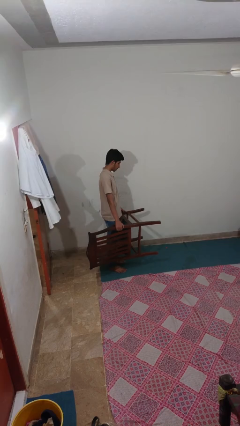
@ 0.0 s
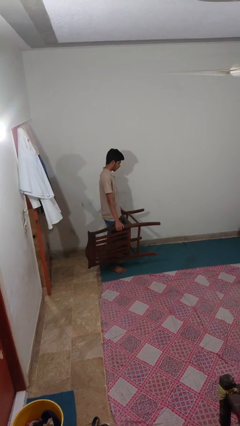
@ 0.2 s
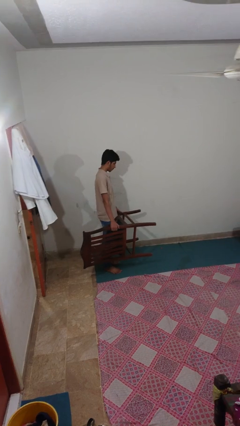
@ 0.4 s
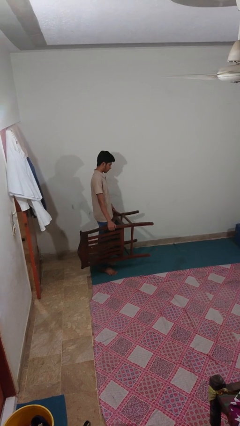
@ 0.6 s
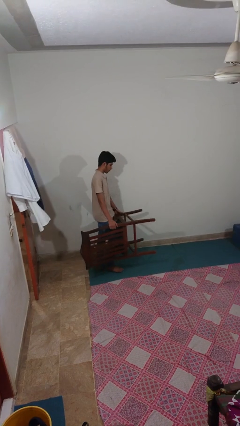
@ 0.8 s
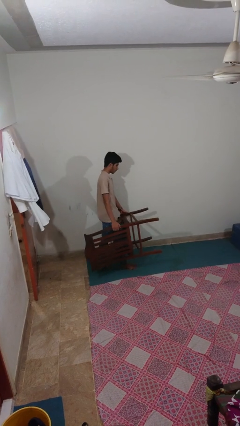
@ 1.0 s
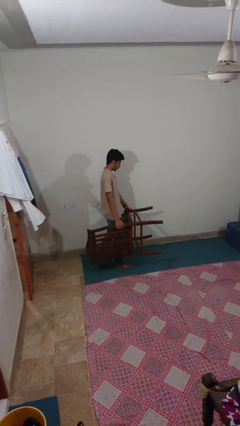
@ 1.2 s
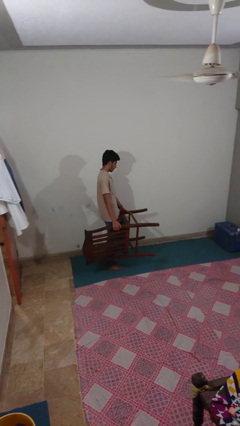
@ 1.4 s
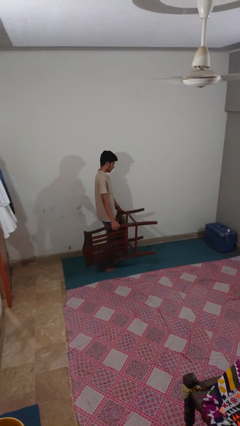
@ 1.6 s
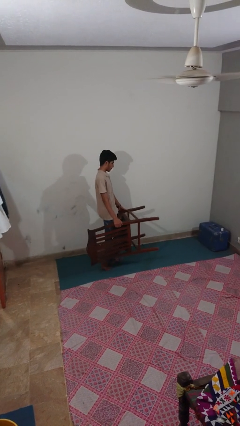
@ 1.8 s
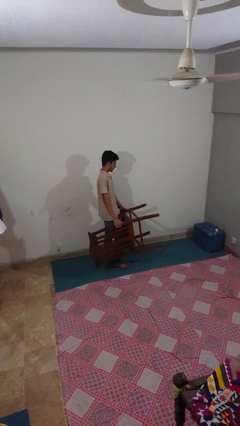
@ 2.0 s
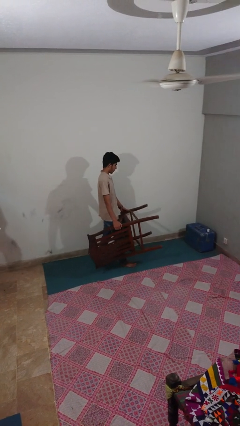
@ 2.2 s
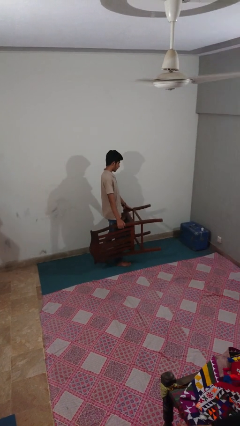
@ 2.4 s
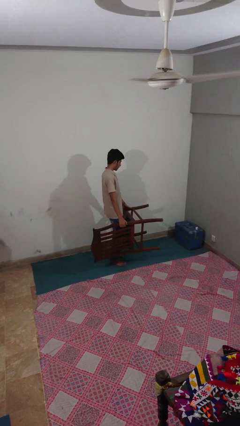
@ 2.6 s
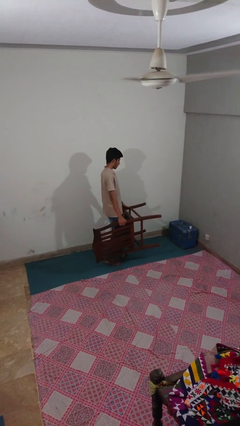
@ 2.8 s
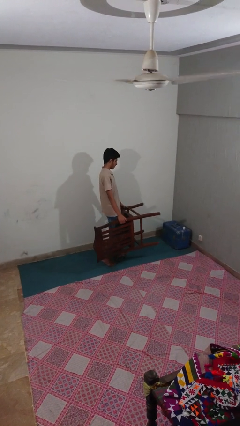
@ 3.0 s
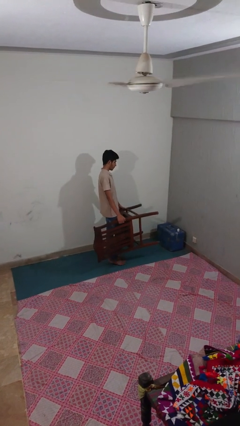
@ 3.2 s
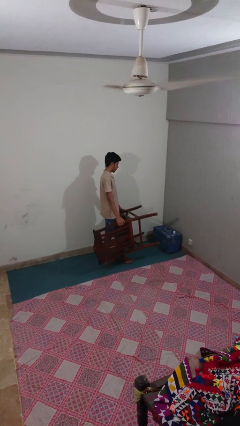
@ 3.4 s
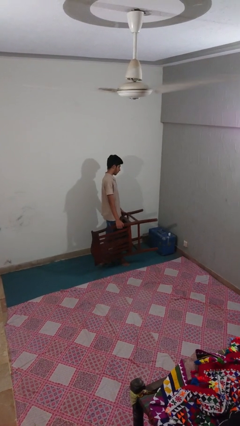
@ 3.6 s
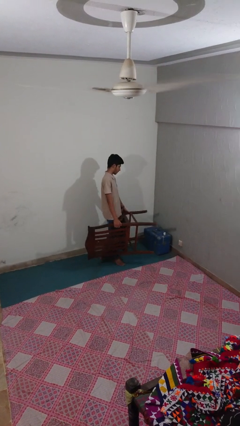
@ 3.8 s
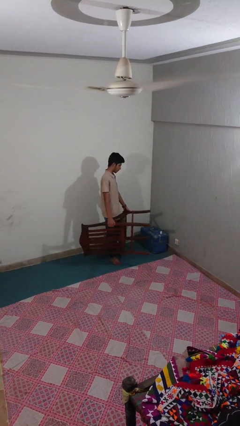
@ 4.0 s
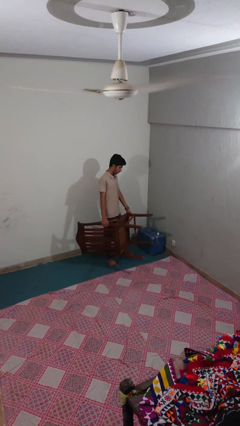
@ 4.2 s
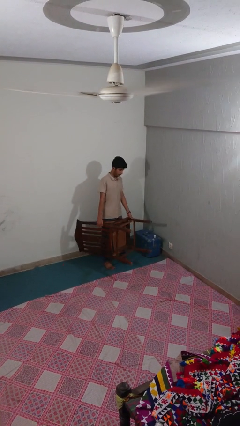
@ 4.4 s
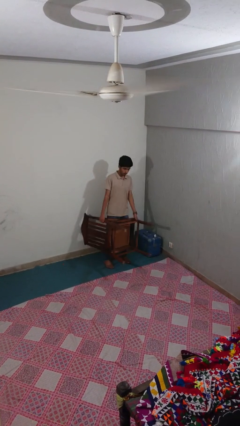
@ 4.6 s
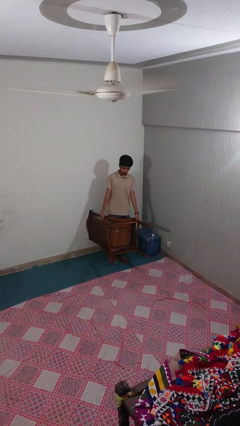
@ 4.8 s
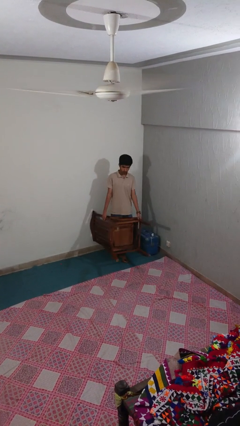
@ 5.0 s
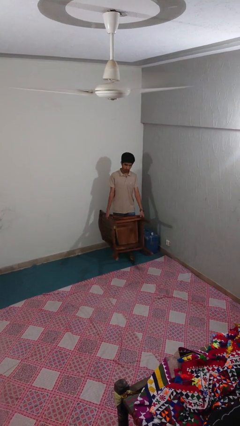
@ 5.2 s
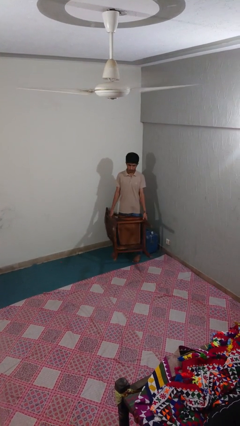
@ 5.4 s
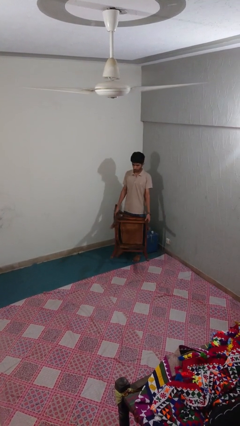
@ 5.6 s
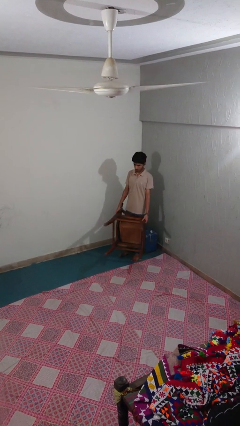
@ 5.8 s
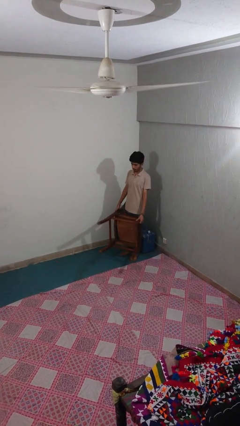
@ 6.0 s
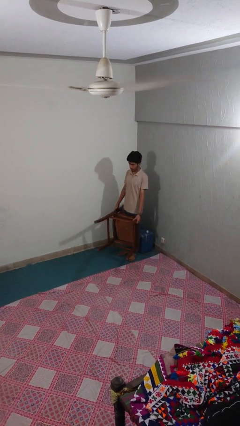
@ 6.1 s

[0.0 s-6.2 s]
person carries furniture

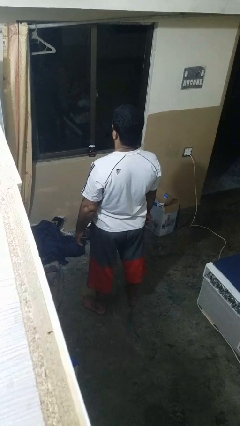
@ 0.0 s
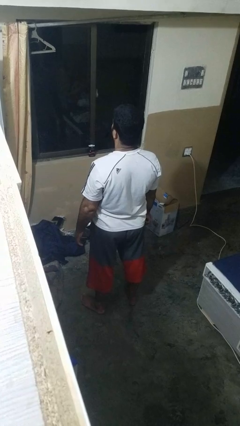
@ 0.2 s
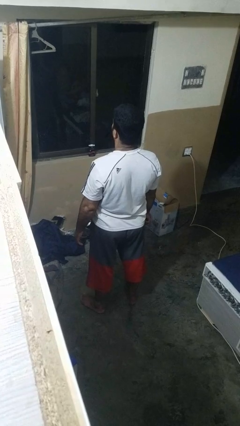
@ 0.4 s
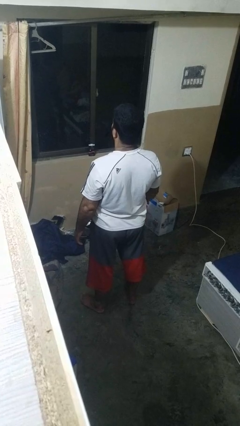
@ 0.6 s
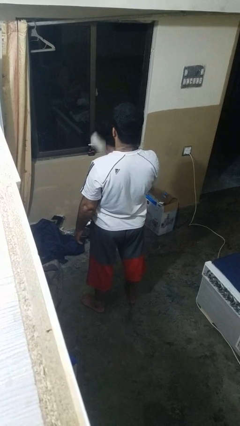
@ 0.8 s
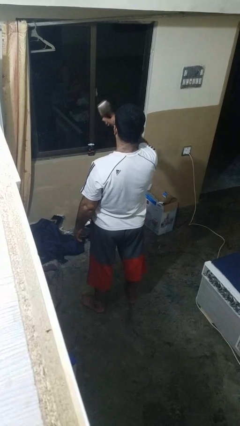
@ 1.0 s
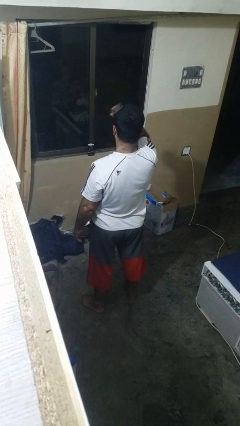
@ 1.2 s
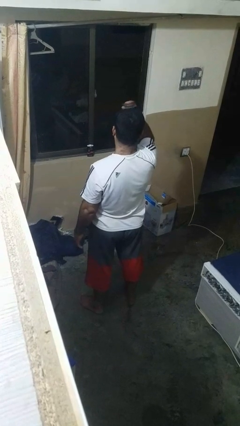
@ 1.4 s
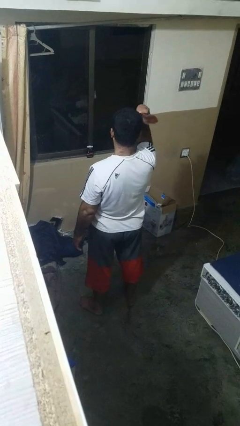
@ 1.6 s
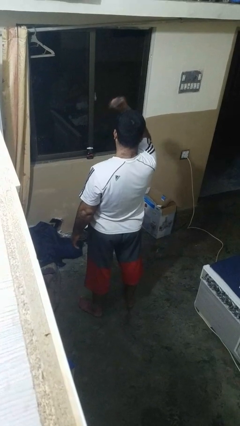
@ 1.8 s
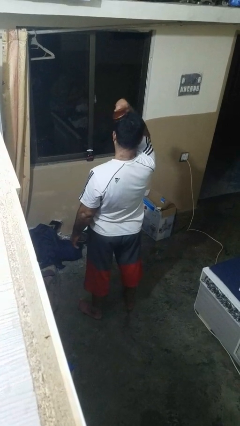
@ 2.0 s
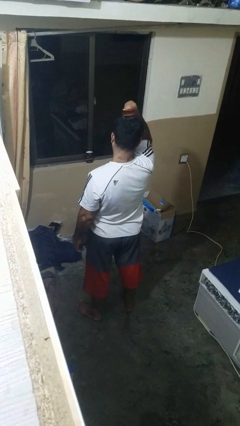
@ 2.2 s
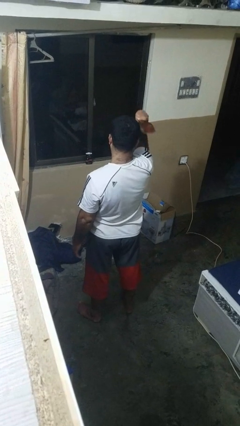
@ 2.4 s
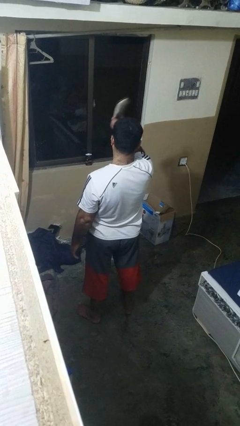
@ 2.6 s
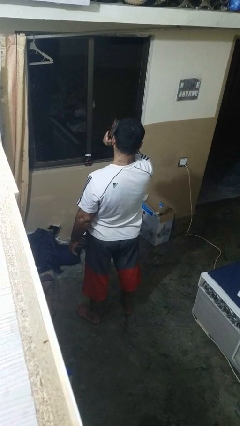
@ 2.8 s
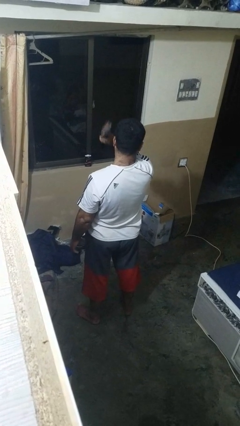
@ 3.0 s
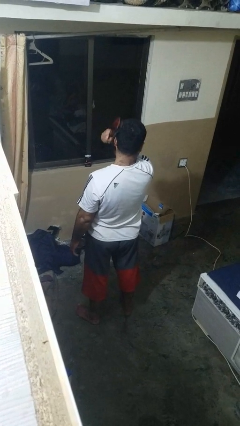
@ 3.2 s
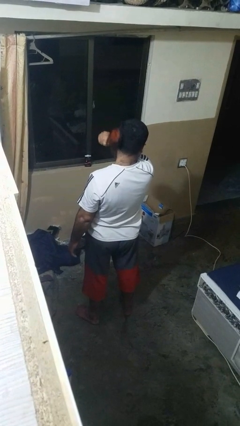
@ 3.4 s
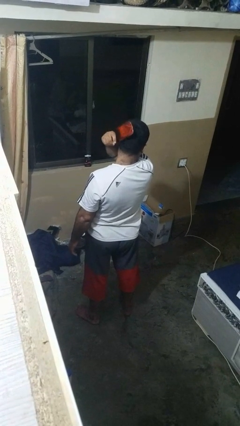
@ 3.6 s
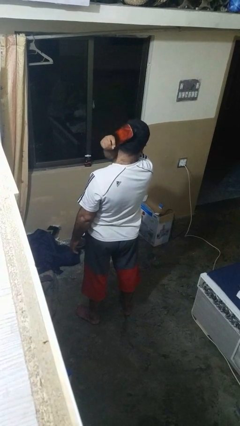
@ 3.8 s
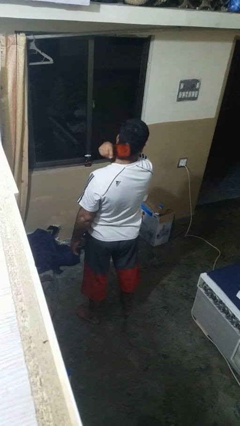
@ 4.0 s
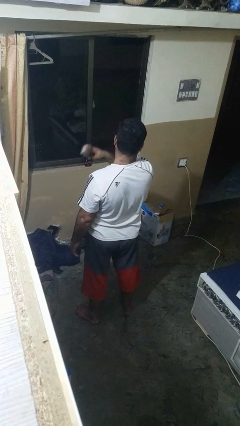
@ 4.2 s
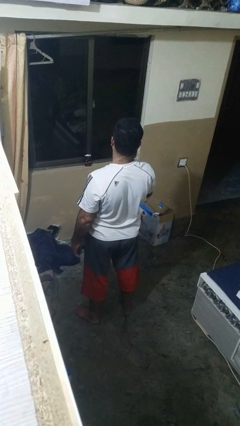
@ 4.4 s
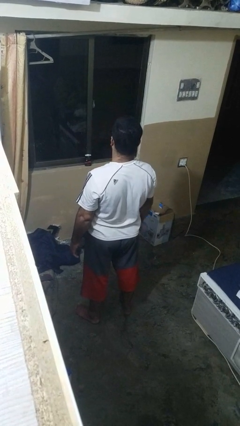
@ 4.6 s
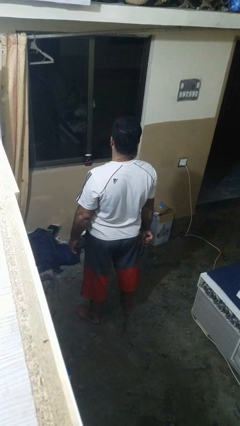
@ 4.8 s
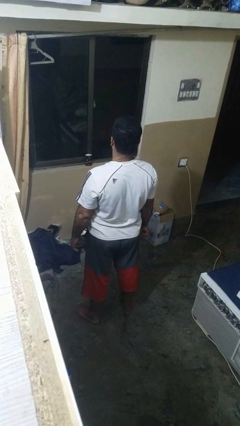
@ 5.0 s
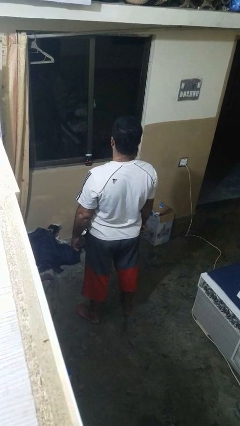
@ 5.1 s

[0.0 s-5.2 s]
person brushes hair

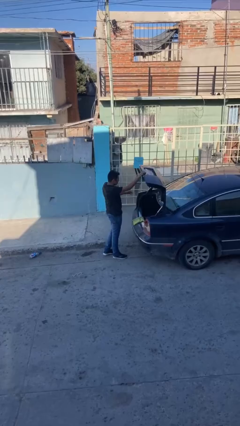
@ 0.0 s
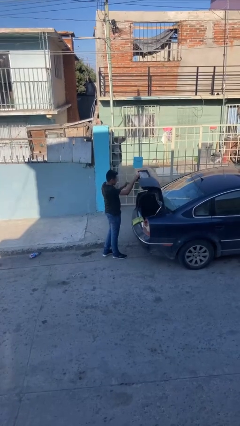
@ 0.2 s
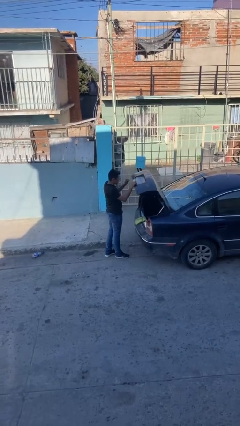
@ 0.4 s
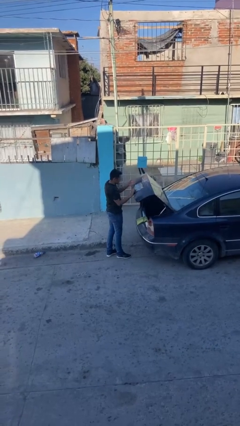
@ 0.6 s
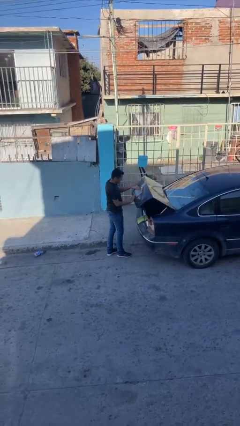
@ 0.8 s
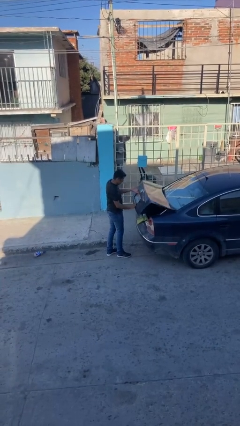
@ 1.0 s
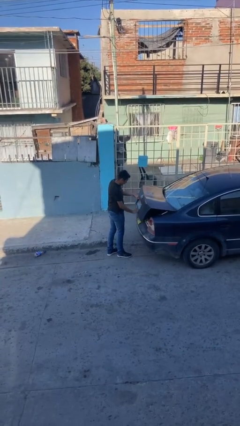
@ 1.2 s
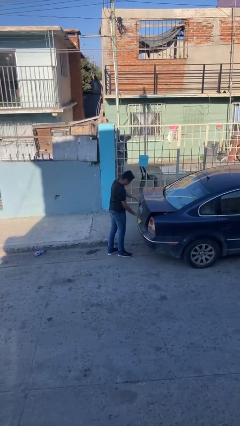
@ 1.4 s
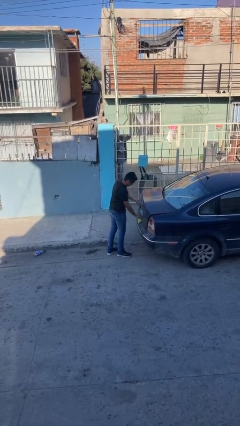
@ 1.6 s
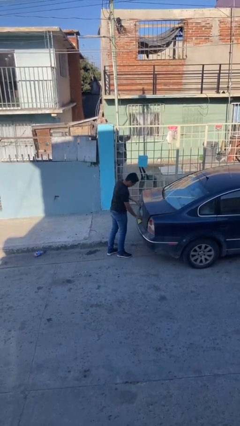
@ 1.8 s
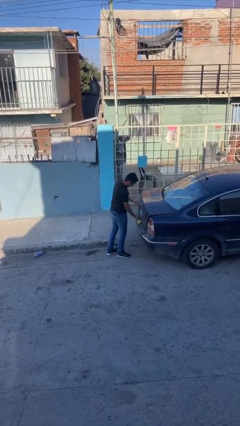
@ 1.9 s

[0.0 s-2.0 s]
person closes car trunk

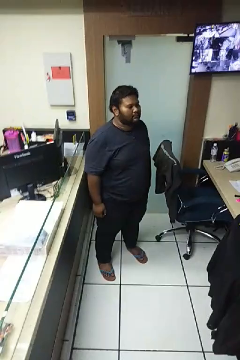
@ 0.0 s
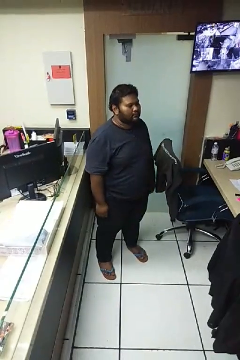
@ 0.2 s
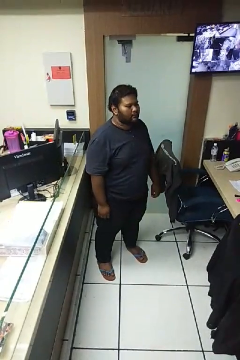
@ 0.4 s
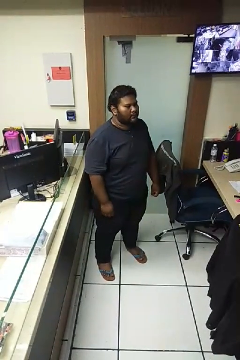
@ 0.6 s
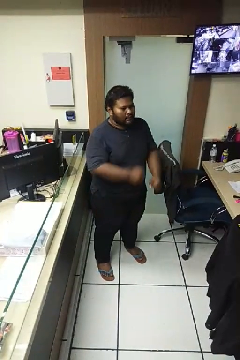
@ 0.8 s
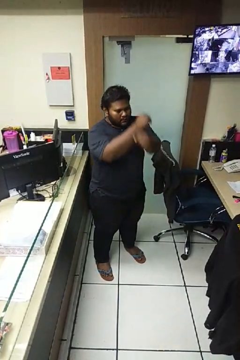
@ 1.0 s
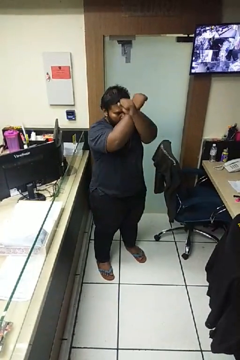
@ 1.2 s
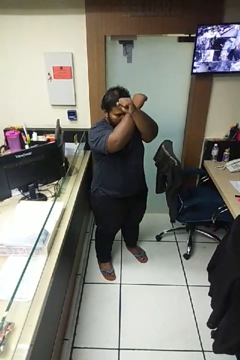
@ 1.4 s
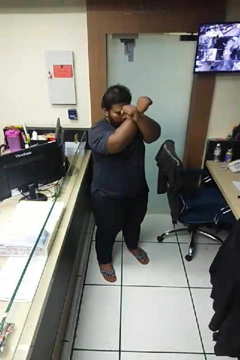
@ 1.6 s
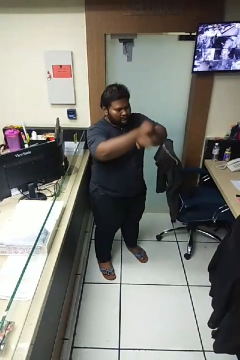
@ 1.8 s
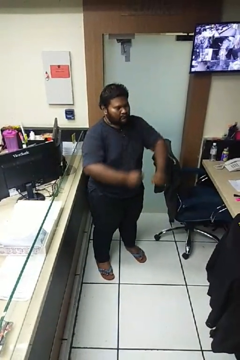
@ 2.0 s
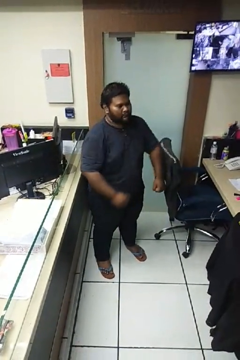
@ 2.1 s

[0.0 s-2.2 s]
person gestures arms x

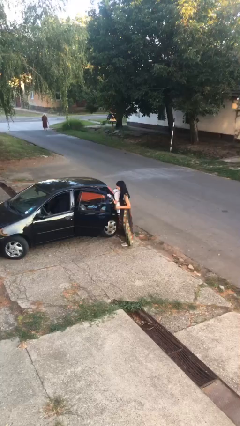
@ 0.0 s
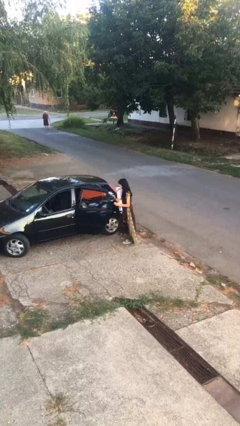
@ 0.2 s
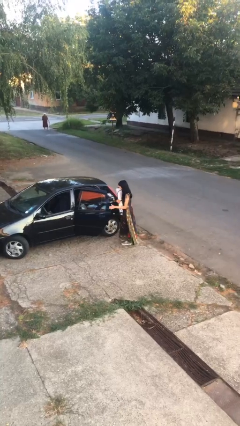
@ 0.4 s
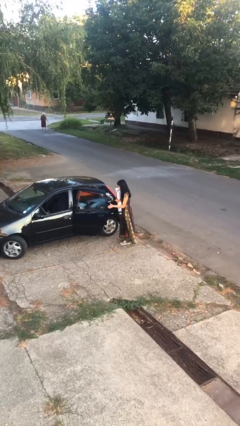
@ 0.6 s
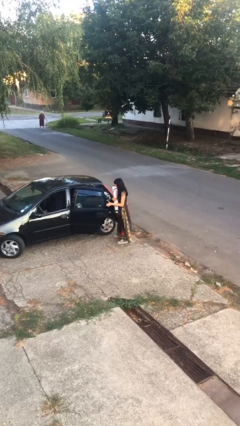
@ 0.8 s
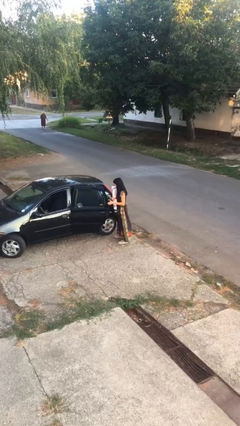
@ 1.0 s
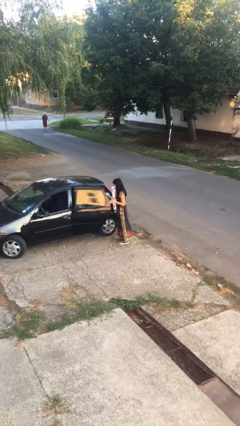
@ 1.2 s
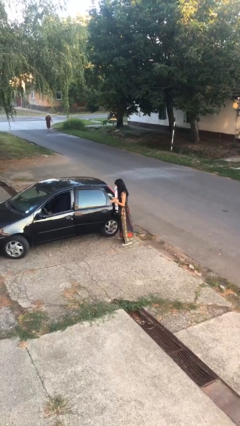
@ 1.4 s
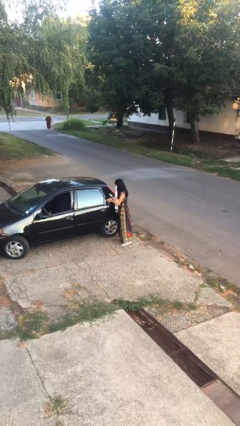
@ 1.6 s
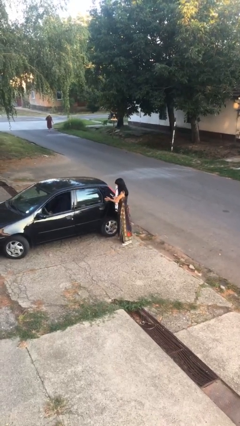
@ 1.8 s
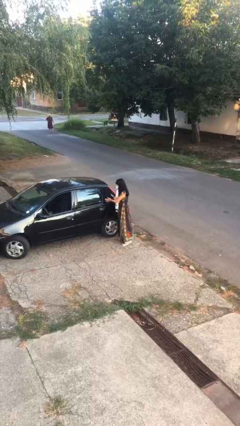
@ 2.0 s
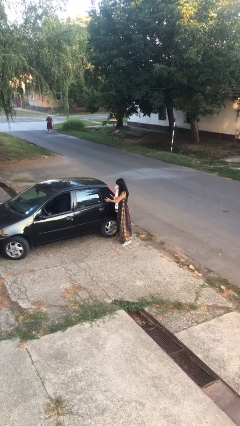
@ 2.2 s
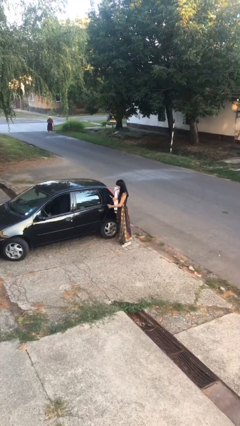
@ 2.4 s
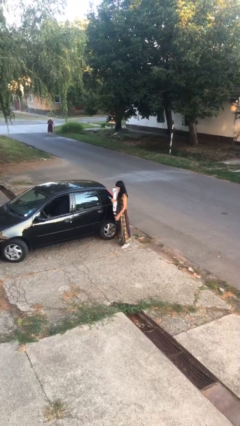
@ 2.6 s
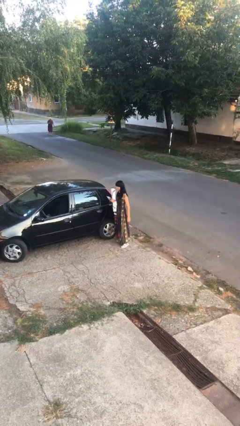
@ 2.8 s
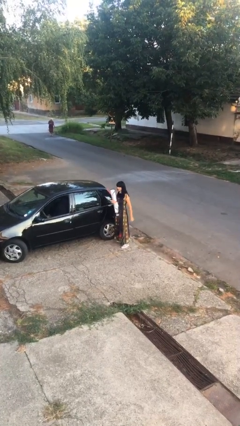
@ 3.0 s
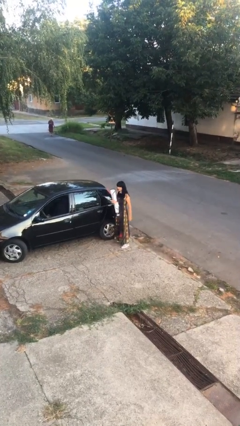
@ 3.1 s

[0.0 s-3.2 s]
person closes car door
